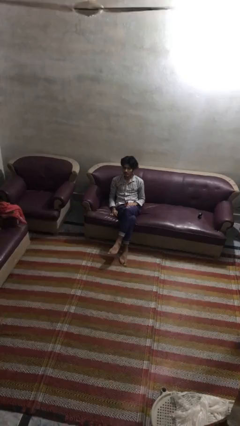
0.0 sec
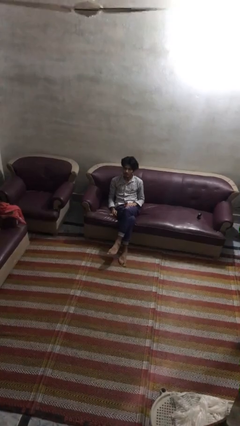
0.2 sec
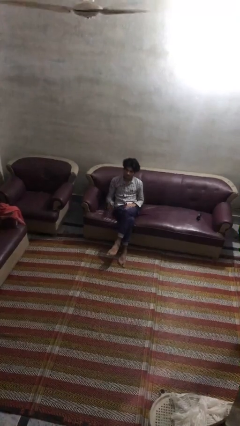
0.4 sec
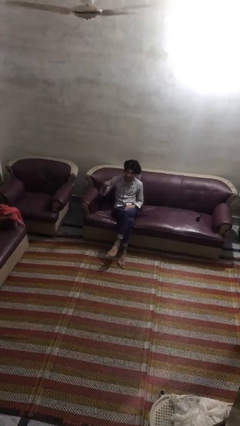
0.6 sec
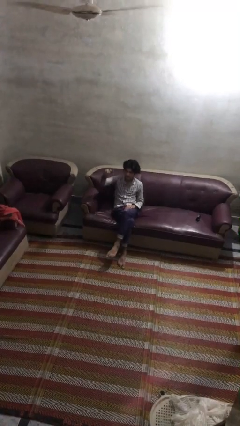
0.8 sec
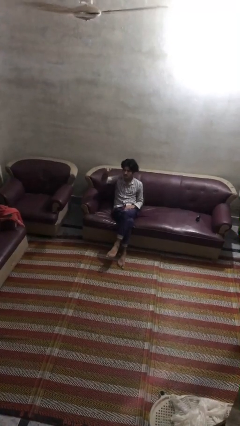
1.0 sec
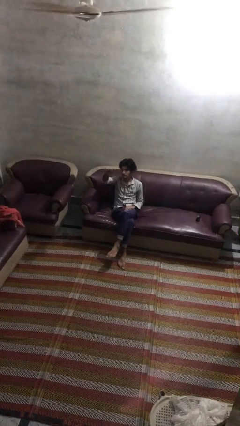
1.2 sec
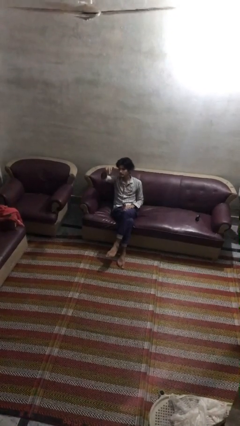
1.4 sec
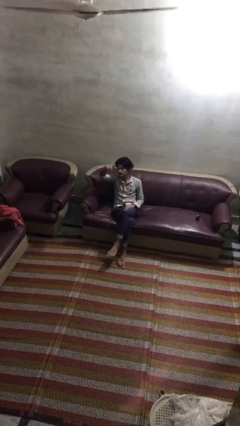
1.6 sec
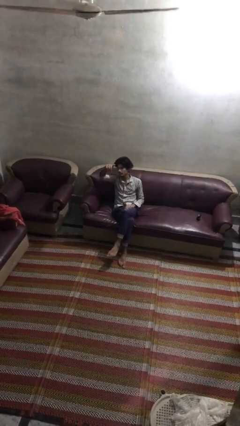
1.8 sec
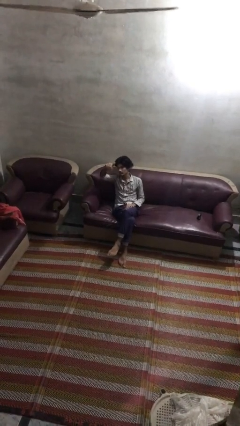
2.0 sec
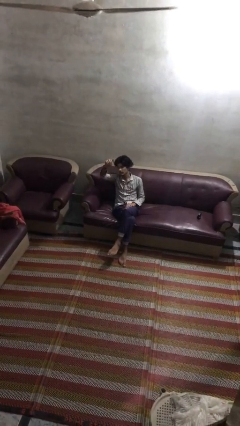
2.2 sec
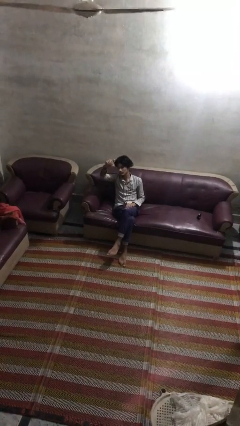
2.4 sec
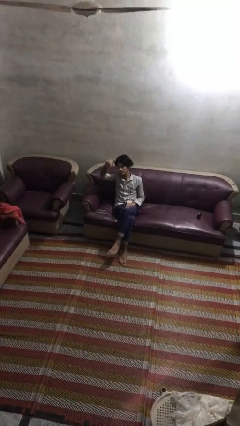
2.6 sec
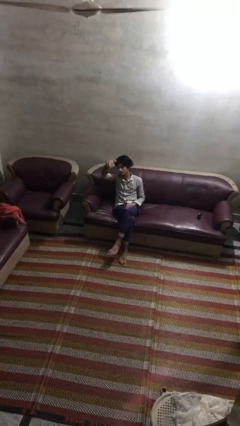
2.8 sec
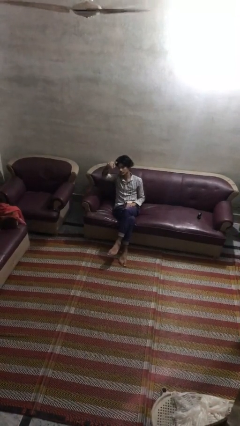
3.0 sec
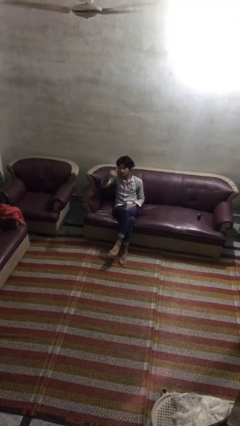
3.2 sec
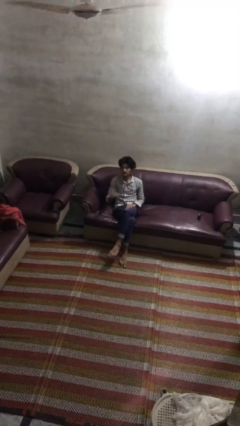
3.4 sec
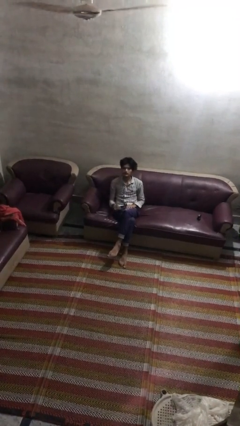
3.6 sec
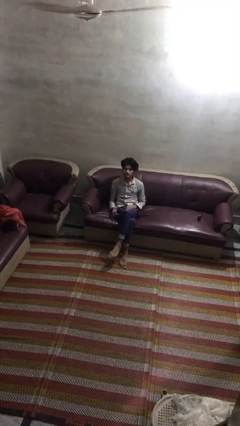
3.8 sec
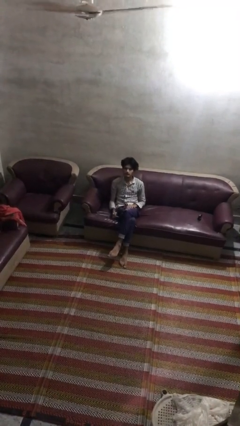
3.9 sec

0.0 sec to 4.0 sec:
person gestures come here

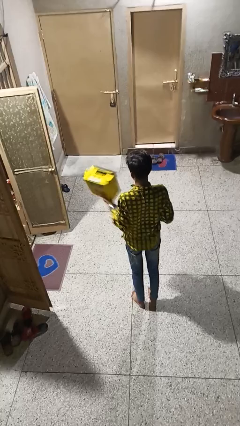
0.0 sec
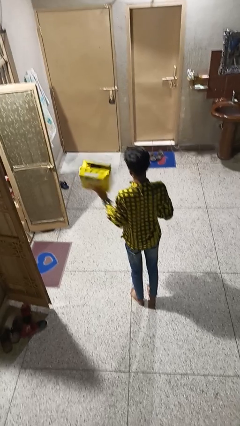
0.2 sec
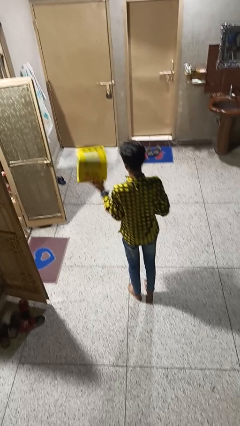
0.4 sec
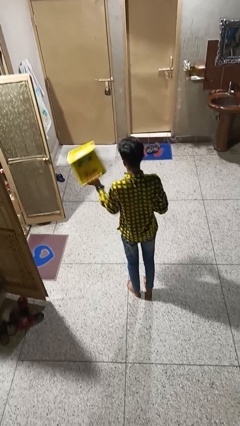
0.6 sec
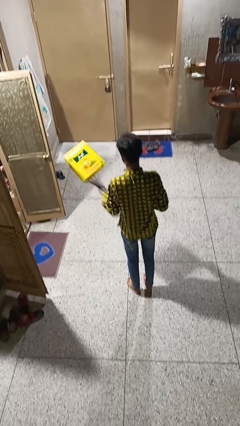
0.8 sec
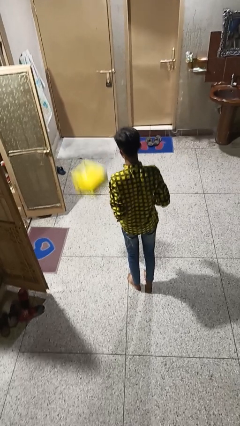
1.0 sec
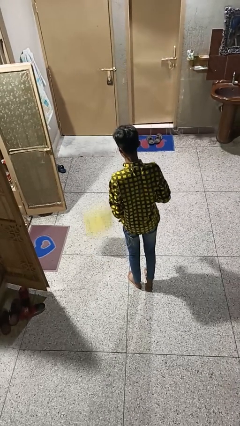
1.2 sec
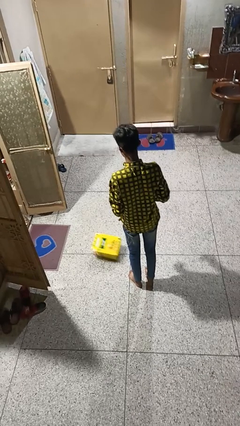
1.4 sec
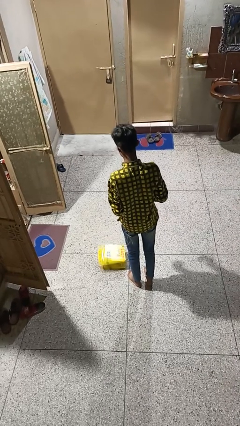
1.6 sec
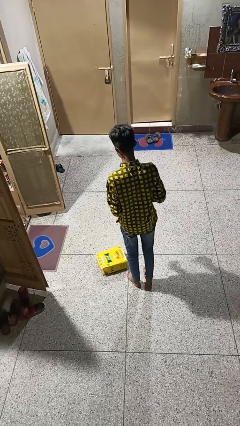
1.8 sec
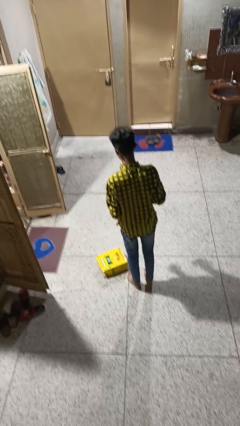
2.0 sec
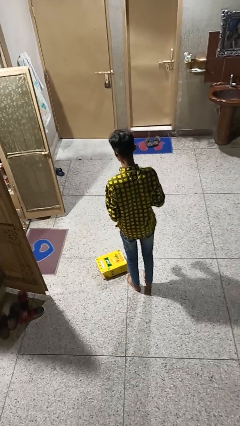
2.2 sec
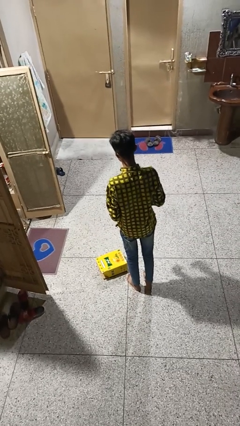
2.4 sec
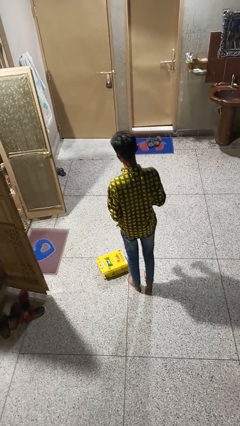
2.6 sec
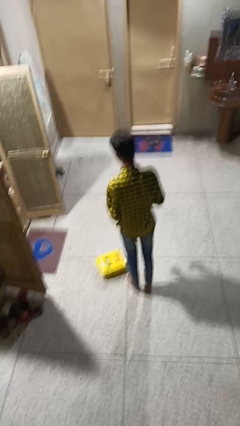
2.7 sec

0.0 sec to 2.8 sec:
person catches dropped object

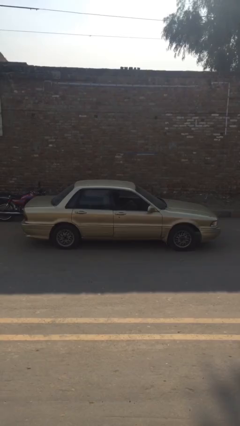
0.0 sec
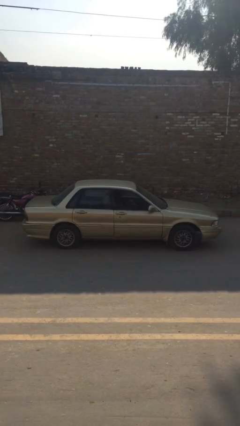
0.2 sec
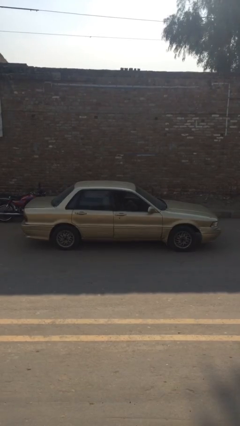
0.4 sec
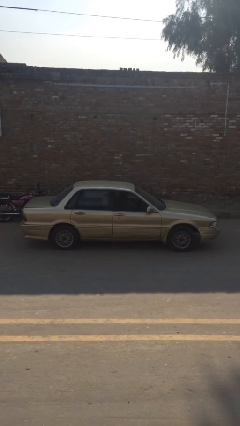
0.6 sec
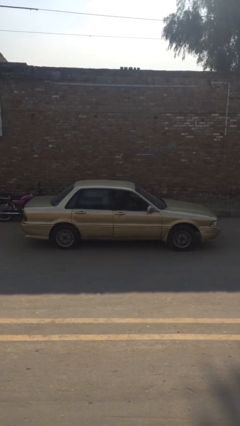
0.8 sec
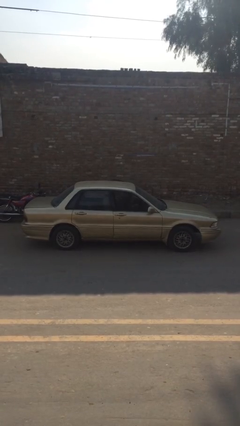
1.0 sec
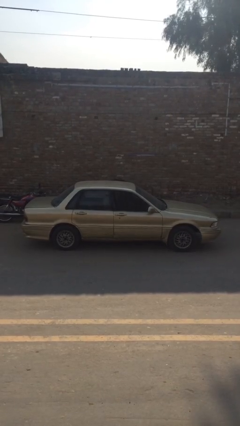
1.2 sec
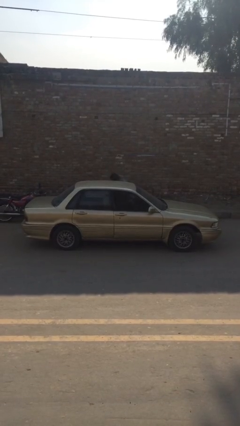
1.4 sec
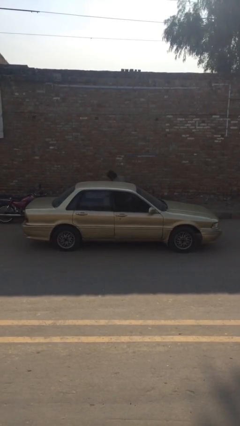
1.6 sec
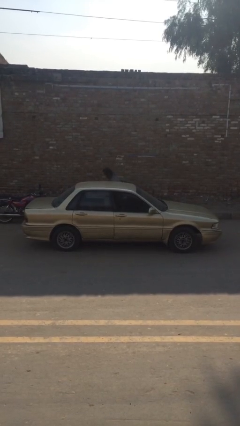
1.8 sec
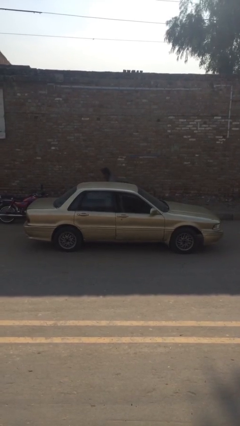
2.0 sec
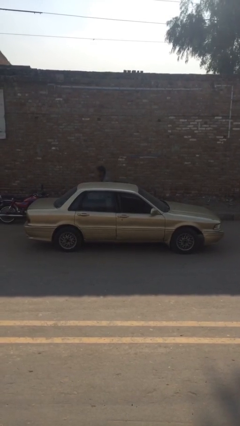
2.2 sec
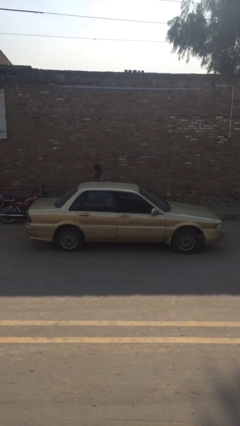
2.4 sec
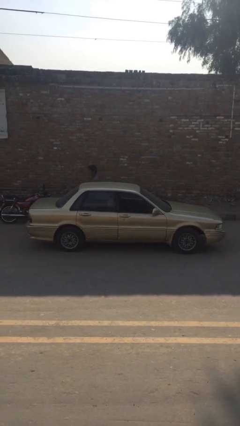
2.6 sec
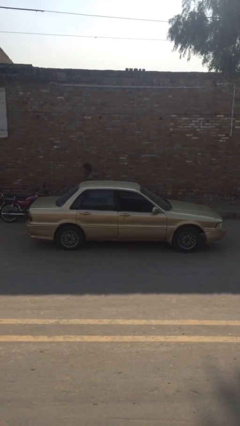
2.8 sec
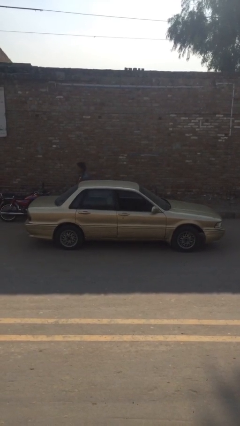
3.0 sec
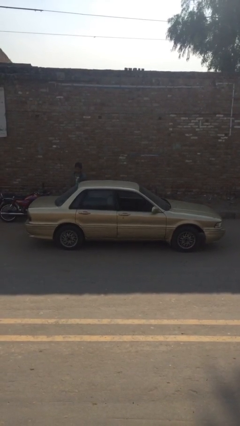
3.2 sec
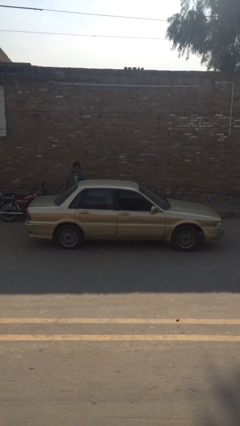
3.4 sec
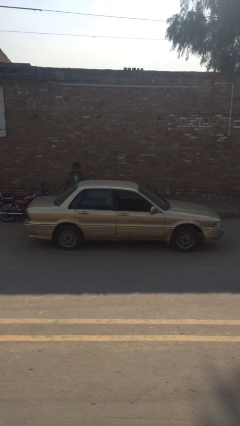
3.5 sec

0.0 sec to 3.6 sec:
car drops off person

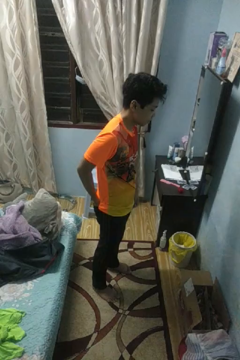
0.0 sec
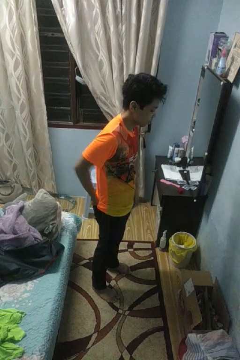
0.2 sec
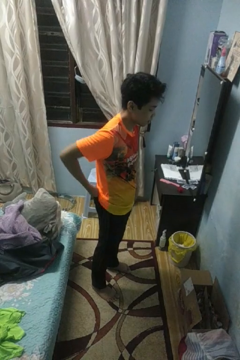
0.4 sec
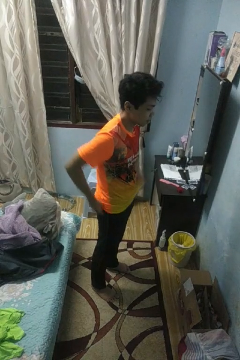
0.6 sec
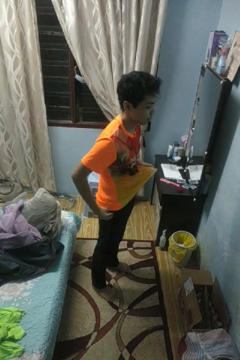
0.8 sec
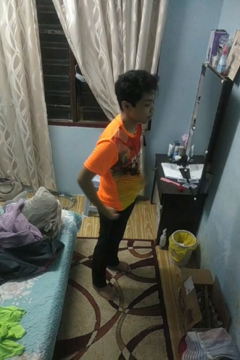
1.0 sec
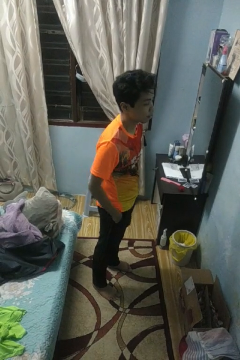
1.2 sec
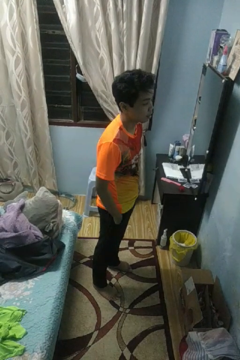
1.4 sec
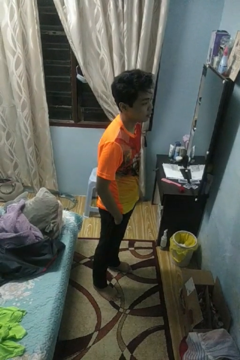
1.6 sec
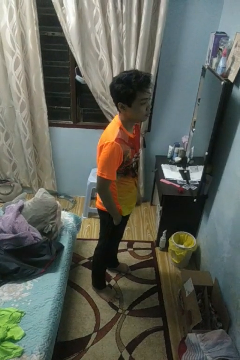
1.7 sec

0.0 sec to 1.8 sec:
person puts hands in back pockets

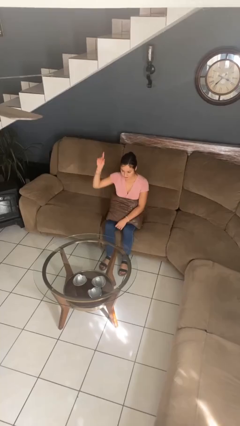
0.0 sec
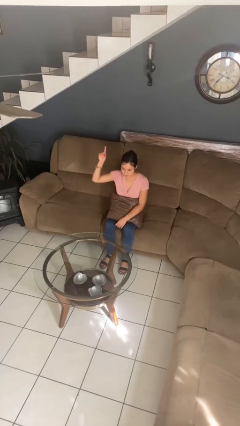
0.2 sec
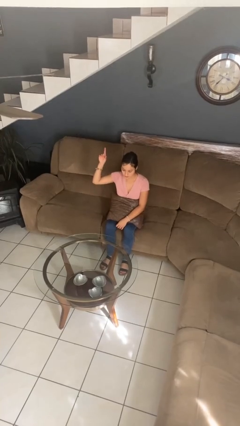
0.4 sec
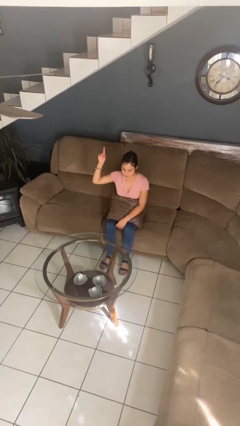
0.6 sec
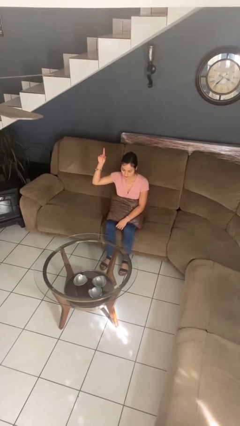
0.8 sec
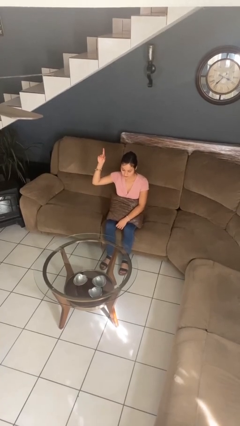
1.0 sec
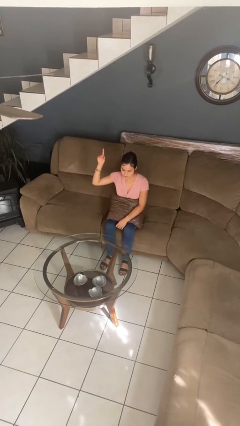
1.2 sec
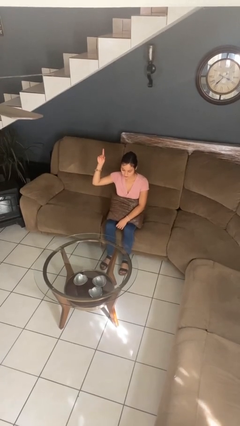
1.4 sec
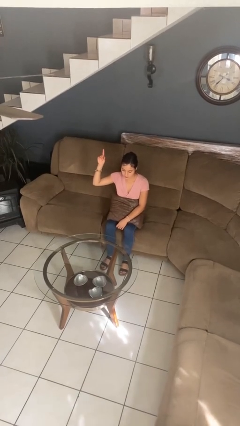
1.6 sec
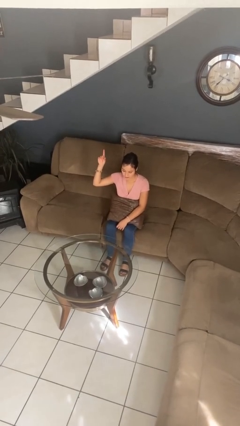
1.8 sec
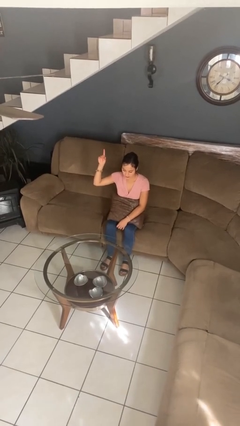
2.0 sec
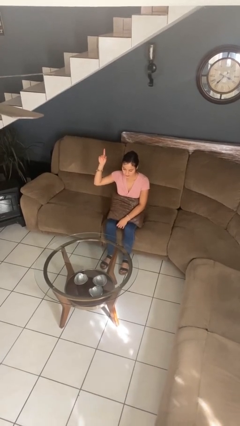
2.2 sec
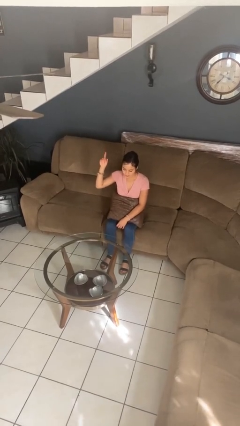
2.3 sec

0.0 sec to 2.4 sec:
person gestures number one

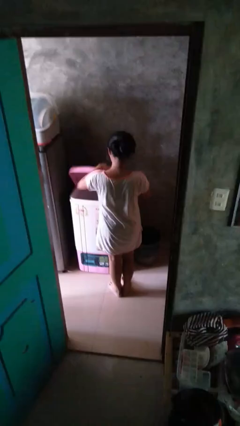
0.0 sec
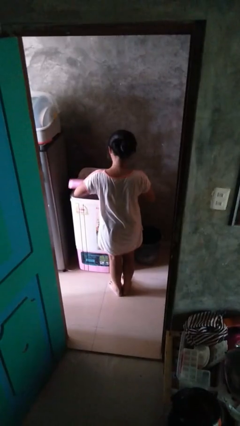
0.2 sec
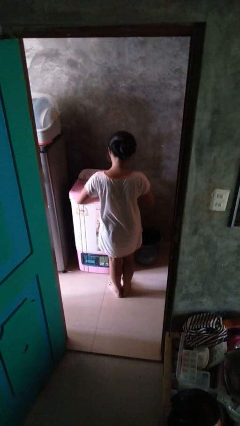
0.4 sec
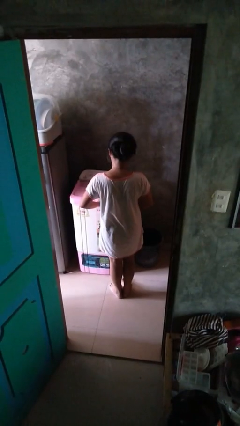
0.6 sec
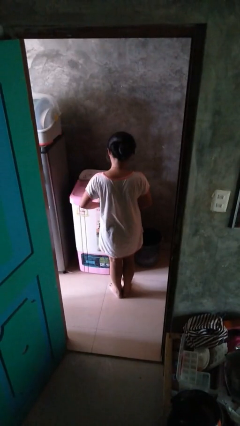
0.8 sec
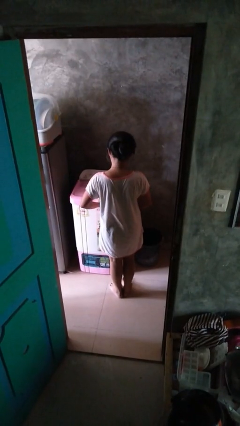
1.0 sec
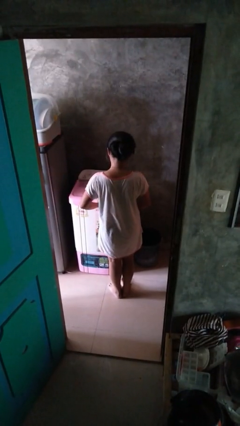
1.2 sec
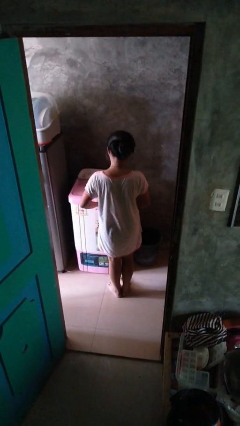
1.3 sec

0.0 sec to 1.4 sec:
person closes clothes washer

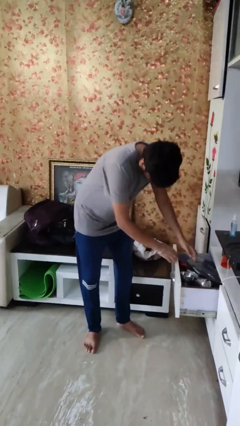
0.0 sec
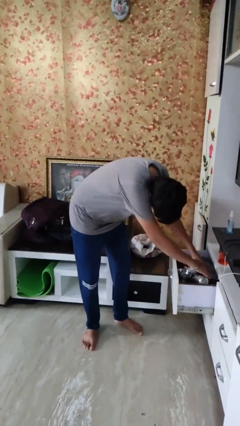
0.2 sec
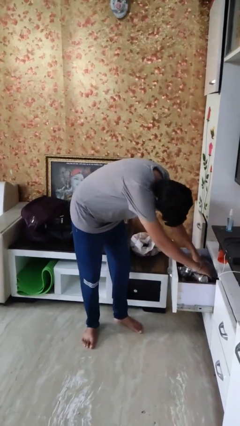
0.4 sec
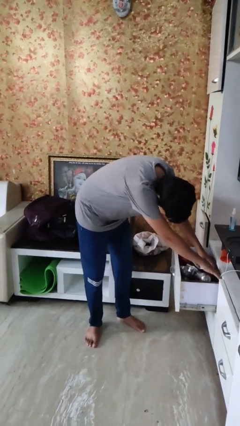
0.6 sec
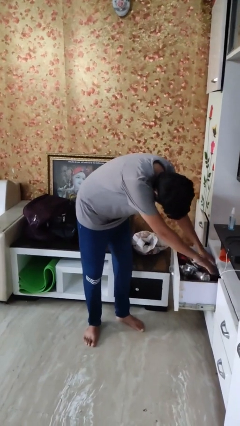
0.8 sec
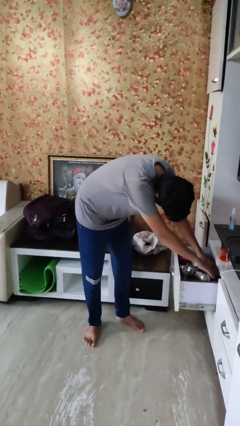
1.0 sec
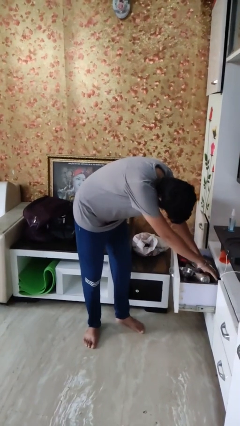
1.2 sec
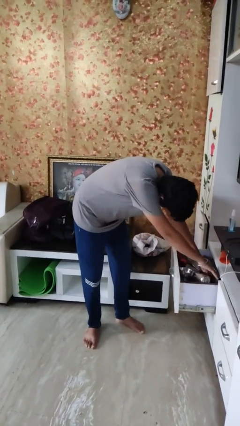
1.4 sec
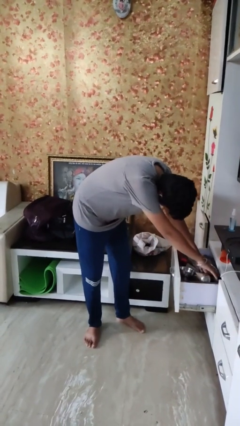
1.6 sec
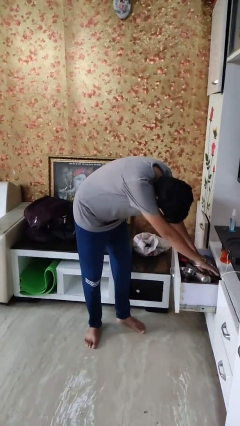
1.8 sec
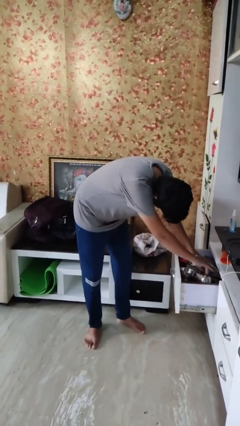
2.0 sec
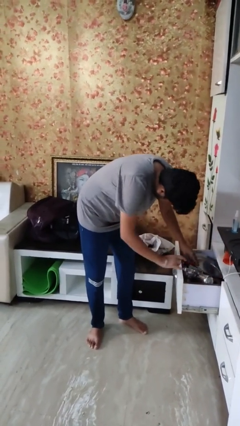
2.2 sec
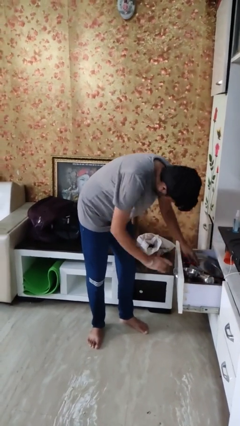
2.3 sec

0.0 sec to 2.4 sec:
person searches in kitchen drawer
